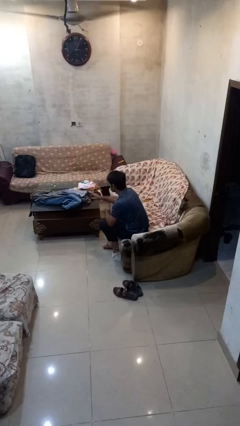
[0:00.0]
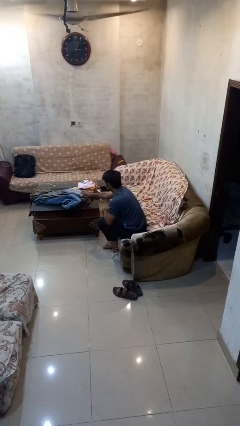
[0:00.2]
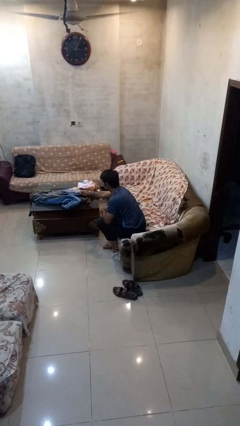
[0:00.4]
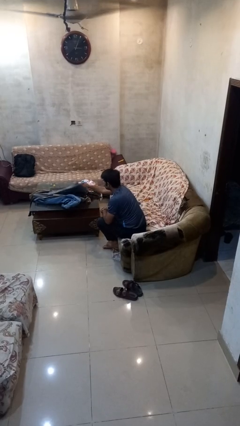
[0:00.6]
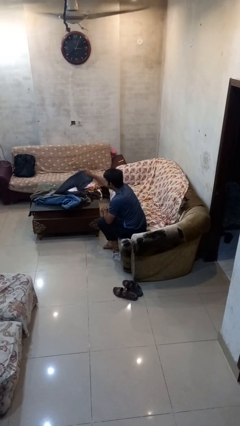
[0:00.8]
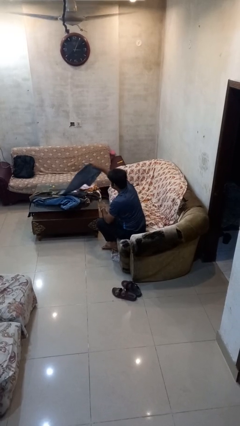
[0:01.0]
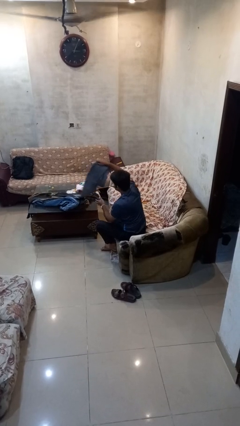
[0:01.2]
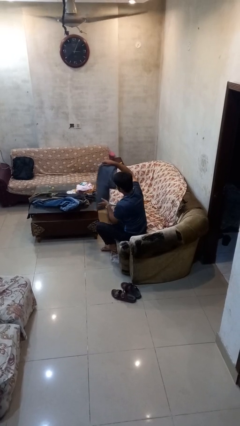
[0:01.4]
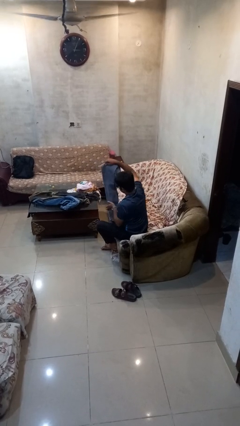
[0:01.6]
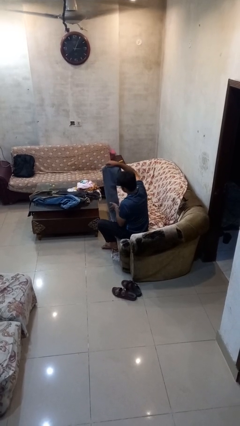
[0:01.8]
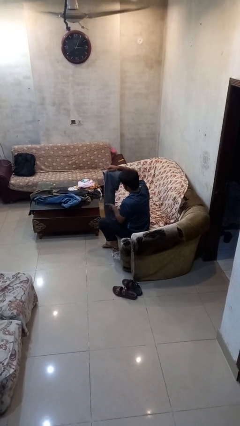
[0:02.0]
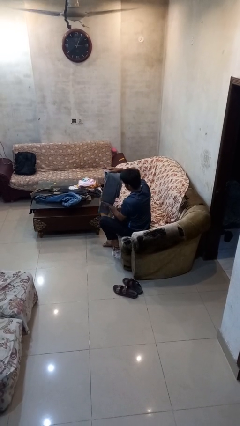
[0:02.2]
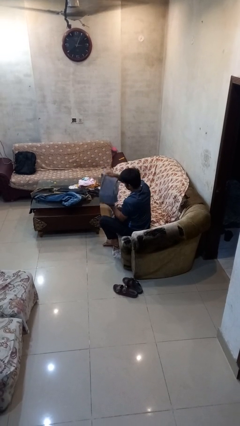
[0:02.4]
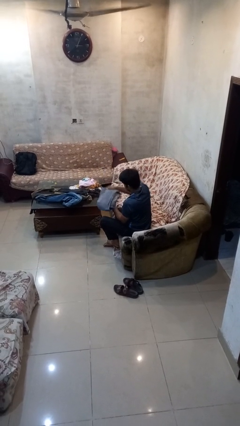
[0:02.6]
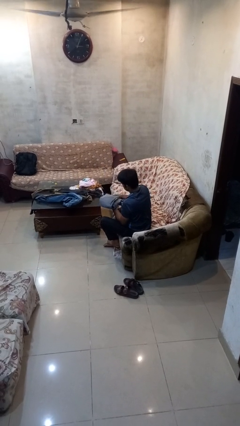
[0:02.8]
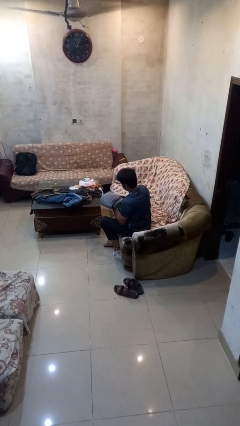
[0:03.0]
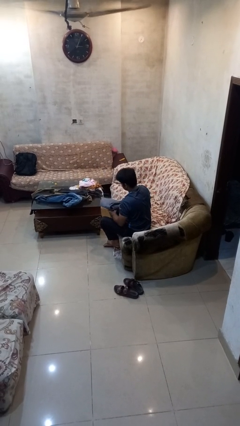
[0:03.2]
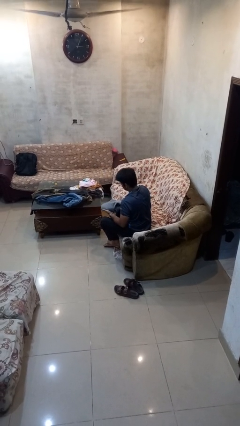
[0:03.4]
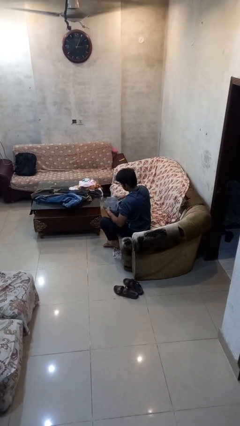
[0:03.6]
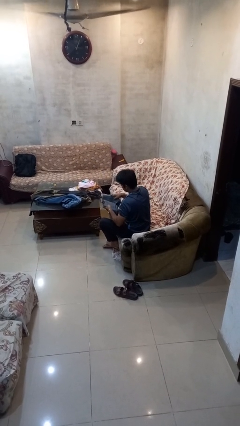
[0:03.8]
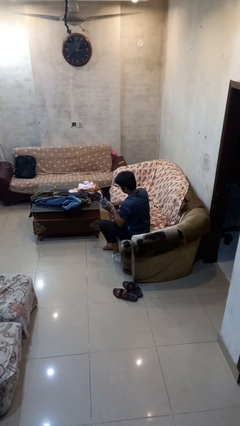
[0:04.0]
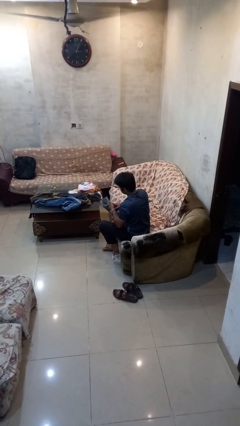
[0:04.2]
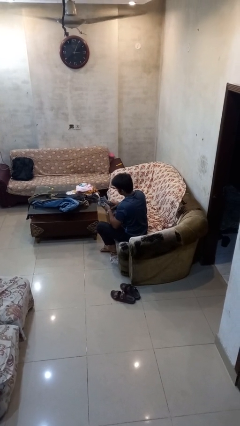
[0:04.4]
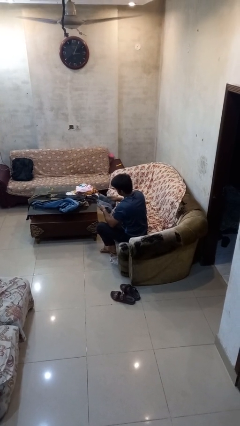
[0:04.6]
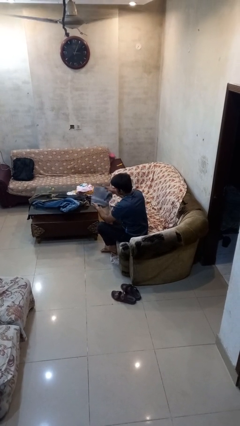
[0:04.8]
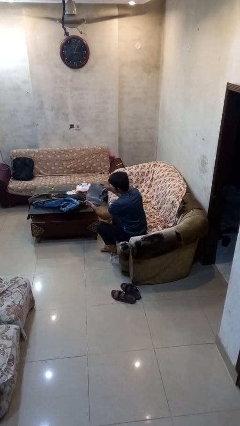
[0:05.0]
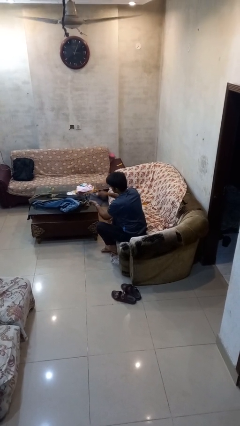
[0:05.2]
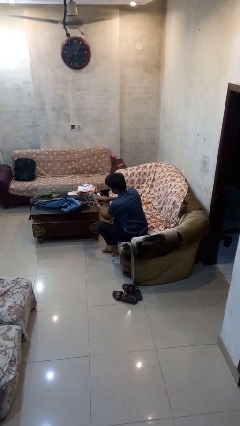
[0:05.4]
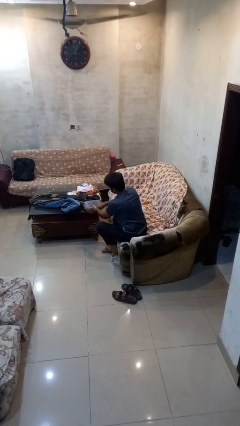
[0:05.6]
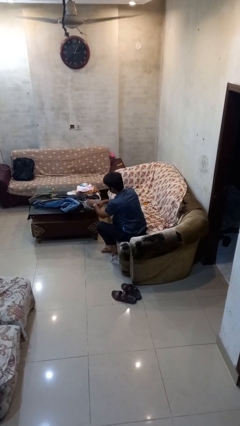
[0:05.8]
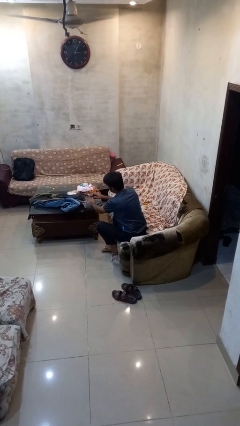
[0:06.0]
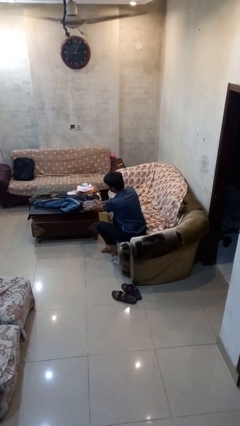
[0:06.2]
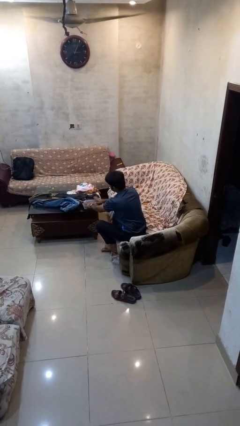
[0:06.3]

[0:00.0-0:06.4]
person folds pants

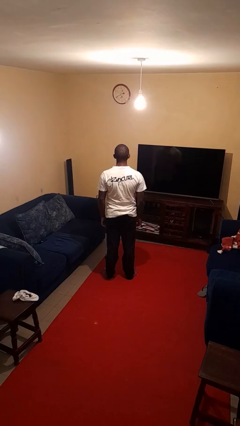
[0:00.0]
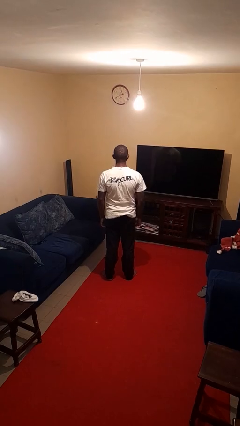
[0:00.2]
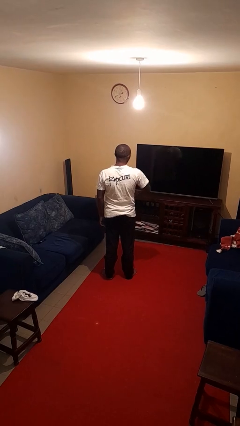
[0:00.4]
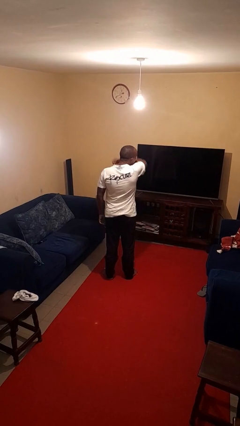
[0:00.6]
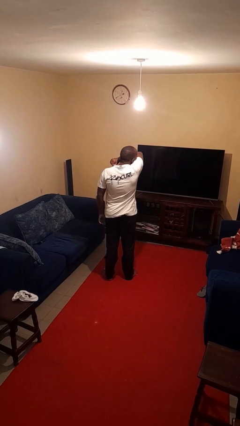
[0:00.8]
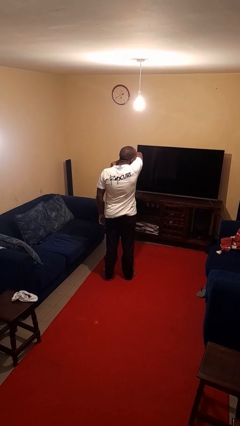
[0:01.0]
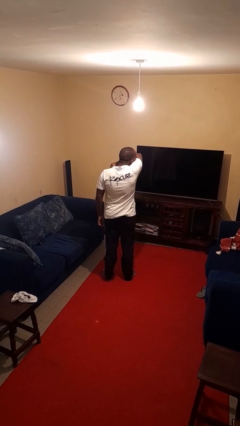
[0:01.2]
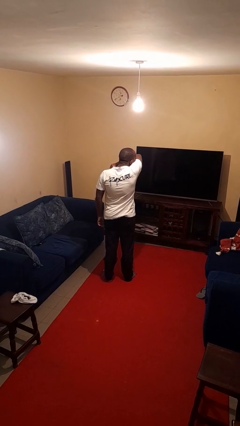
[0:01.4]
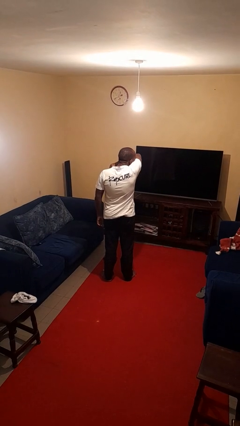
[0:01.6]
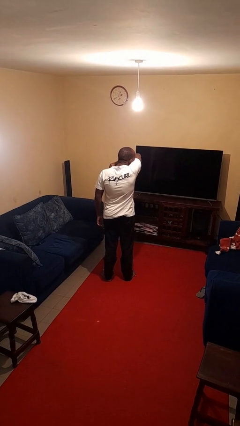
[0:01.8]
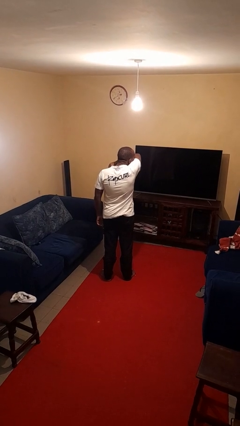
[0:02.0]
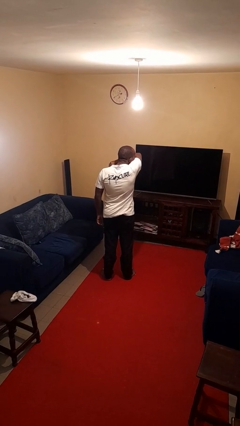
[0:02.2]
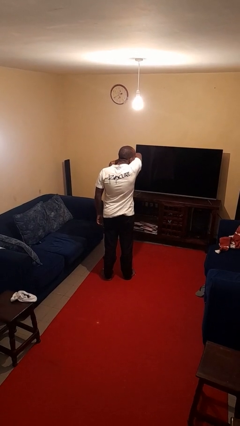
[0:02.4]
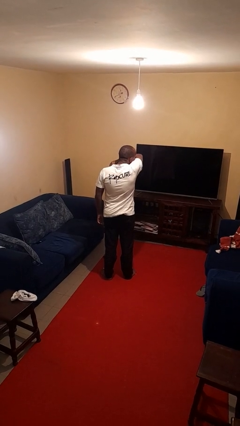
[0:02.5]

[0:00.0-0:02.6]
person sneezes into arm

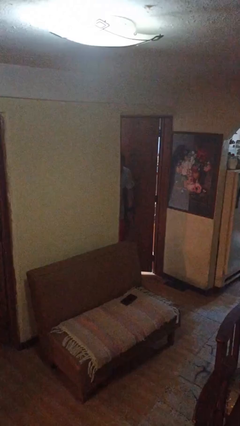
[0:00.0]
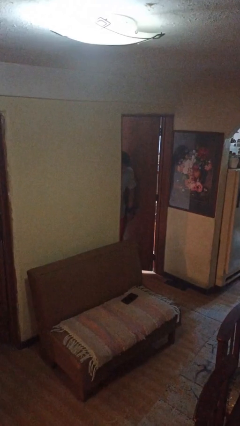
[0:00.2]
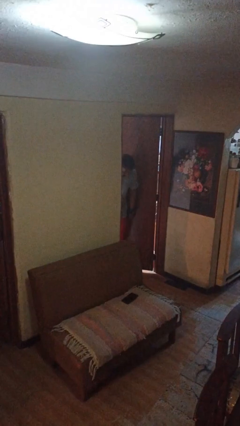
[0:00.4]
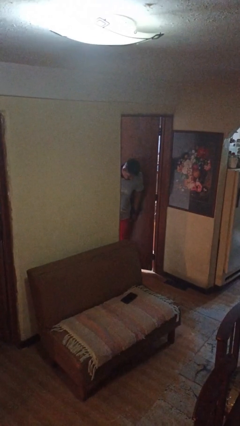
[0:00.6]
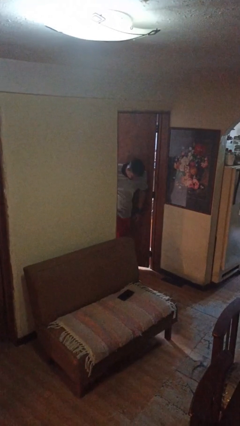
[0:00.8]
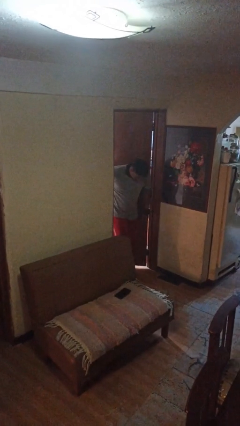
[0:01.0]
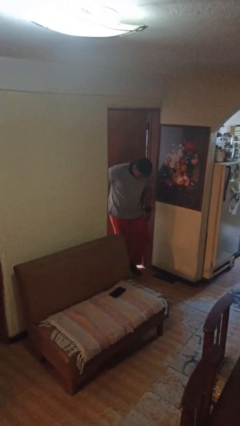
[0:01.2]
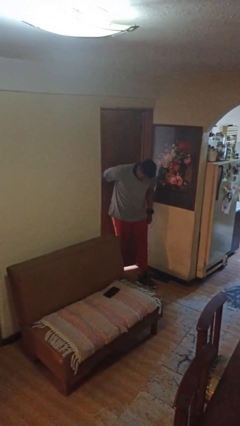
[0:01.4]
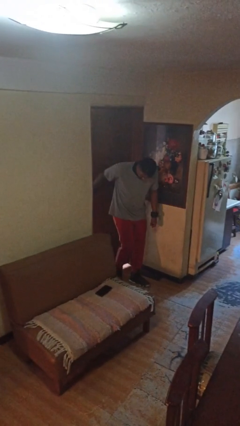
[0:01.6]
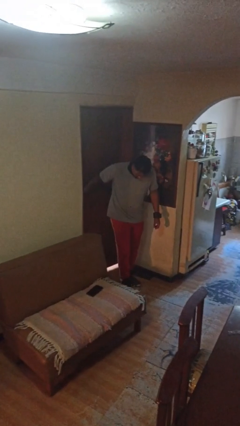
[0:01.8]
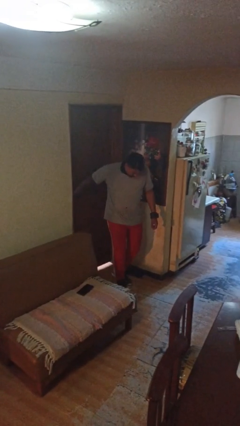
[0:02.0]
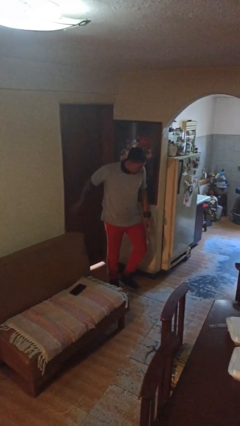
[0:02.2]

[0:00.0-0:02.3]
person closes facility door

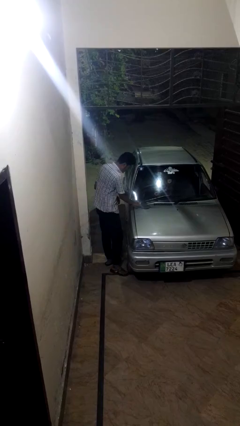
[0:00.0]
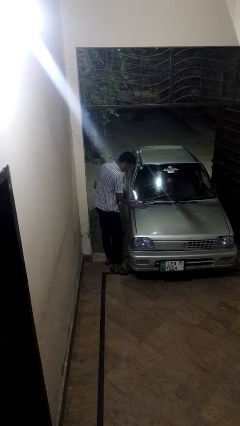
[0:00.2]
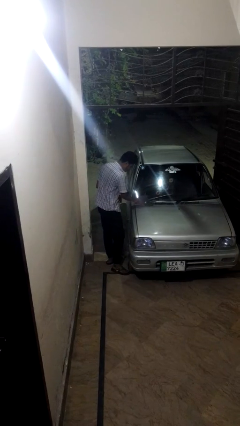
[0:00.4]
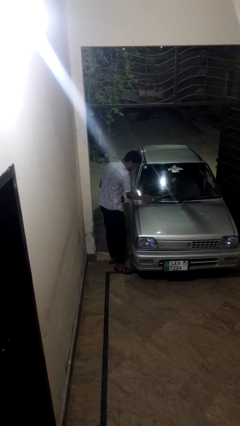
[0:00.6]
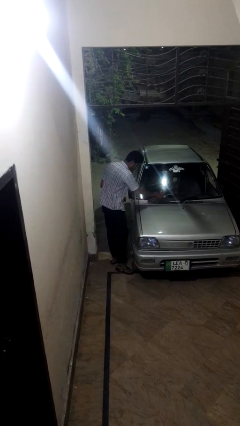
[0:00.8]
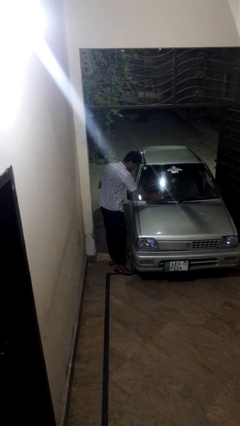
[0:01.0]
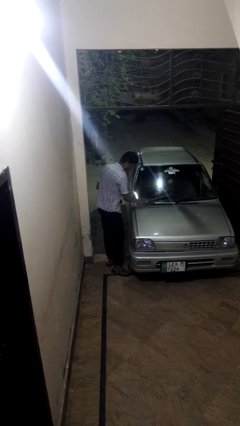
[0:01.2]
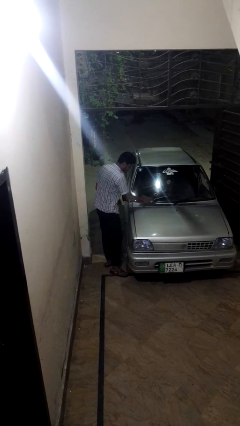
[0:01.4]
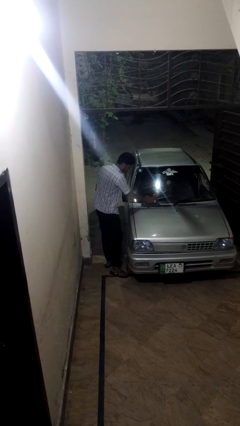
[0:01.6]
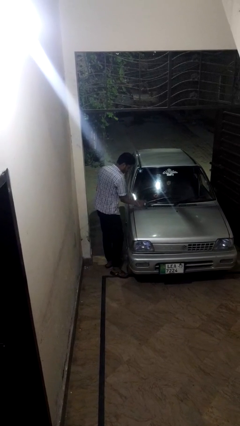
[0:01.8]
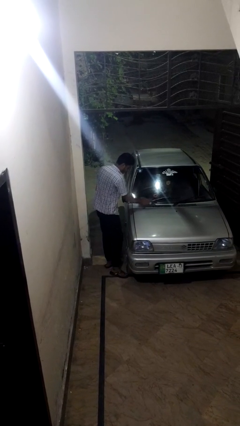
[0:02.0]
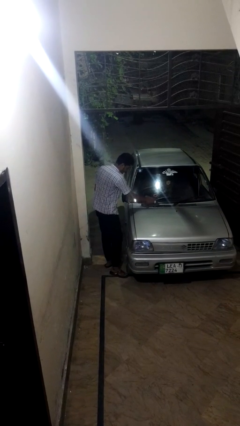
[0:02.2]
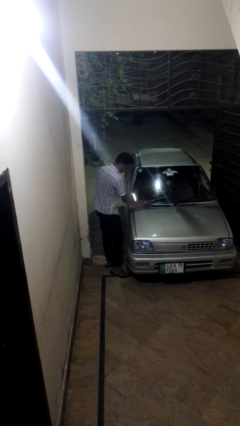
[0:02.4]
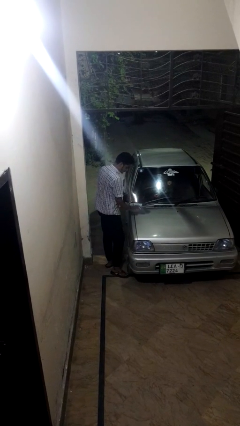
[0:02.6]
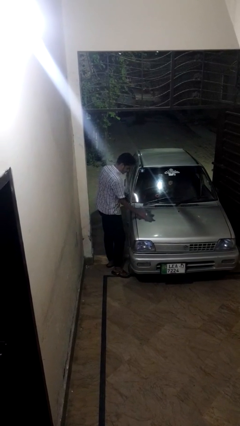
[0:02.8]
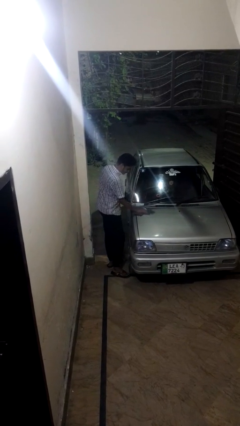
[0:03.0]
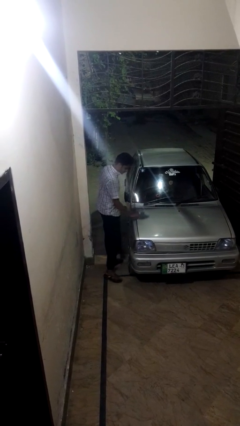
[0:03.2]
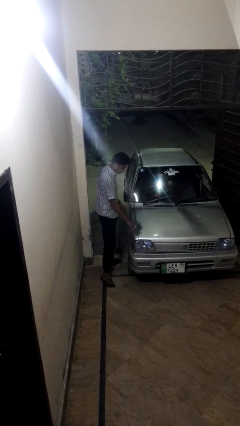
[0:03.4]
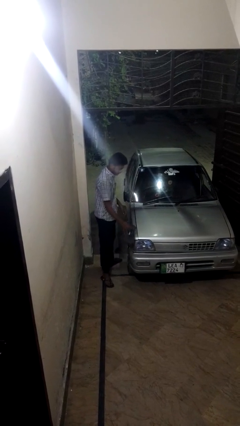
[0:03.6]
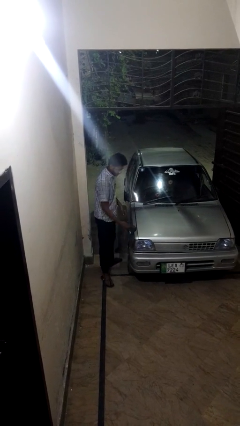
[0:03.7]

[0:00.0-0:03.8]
person polishes car with rag

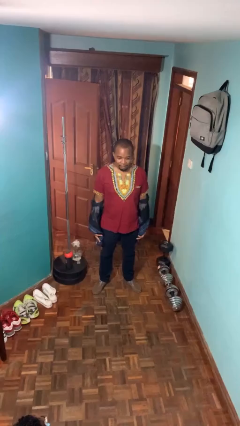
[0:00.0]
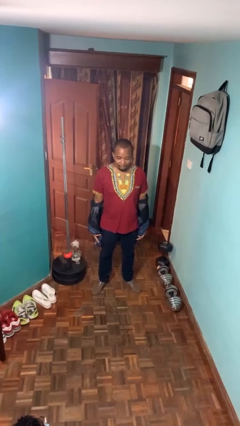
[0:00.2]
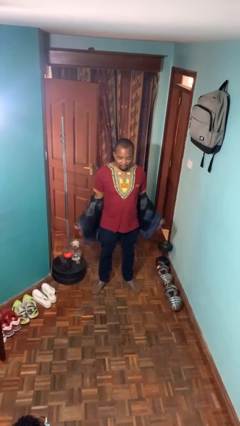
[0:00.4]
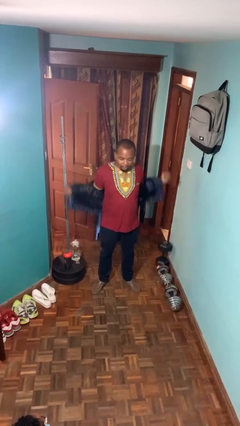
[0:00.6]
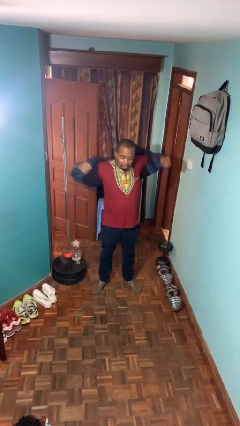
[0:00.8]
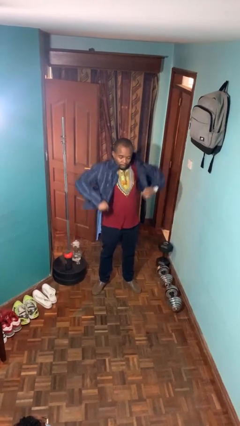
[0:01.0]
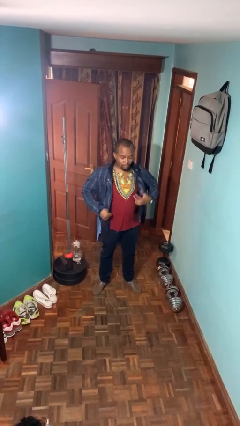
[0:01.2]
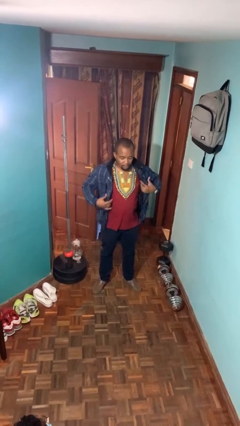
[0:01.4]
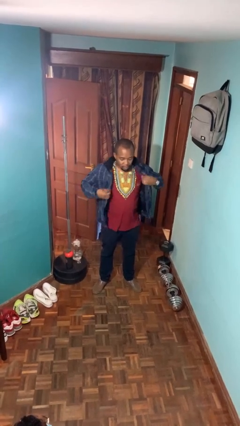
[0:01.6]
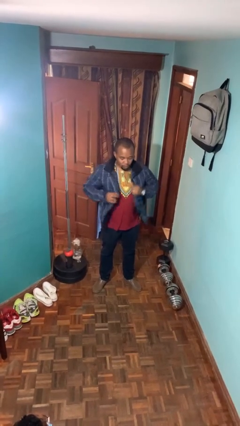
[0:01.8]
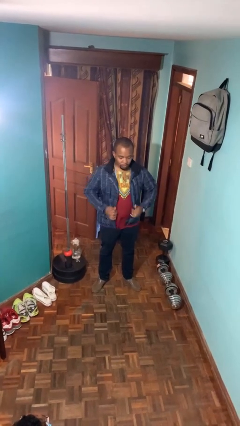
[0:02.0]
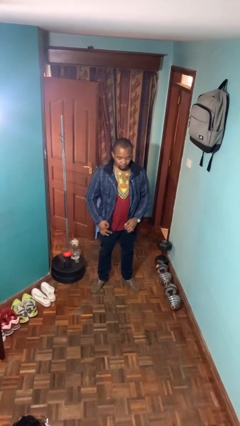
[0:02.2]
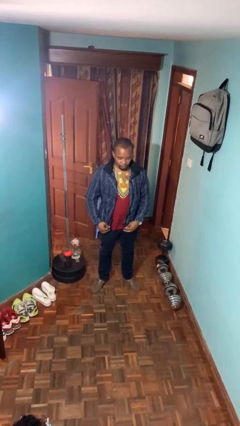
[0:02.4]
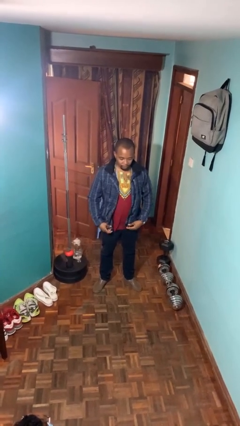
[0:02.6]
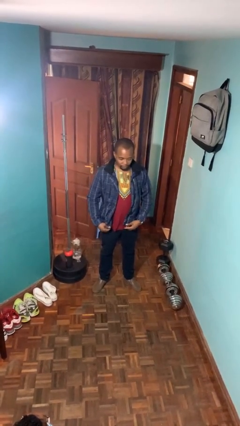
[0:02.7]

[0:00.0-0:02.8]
person puts on jacket
